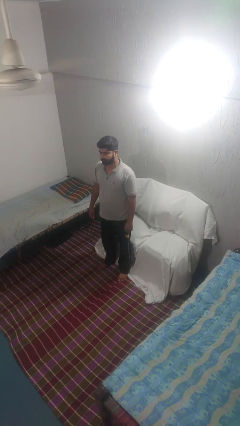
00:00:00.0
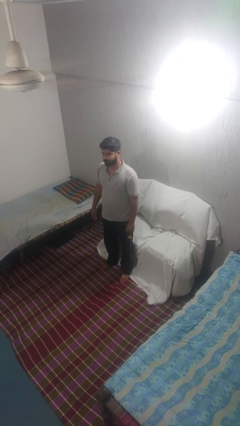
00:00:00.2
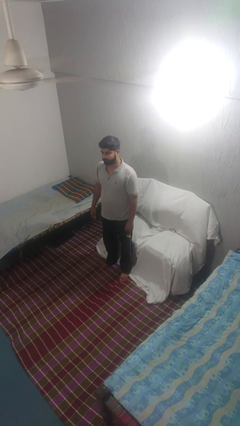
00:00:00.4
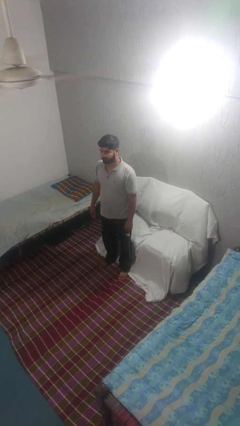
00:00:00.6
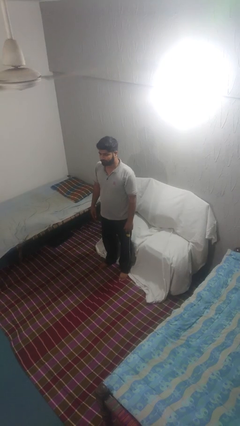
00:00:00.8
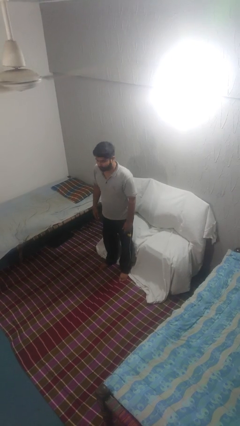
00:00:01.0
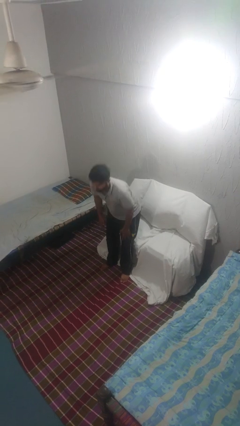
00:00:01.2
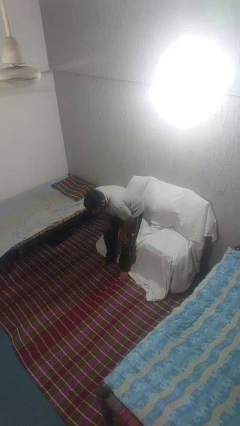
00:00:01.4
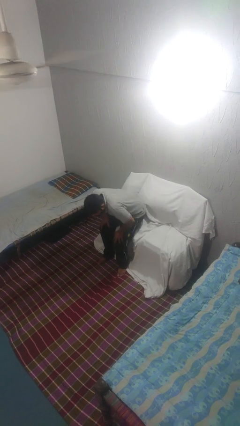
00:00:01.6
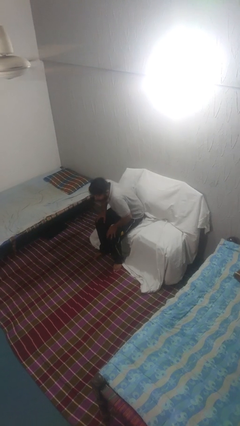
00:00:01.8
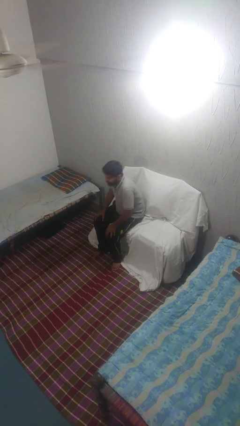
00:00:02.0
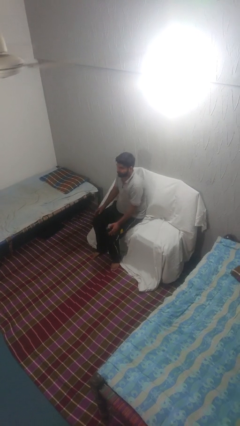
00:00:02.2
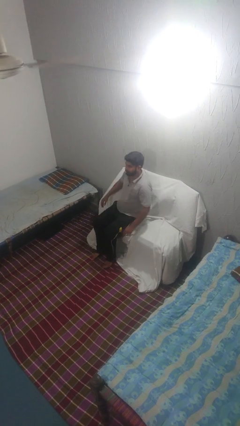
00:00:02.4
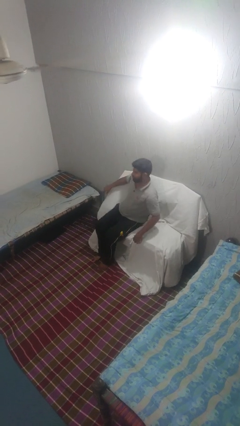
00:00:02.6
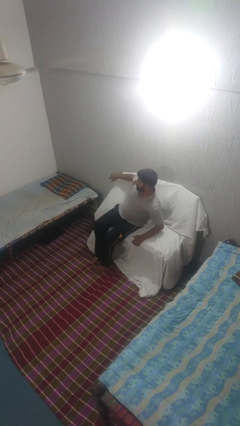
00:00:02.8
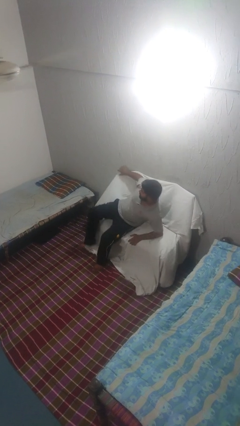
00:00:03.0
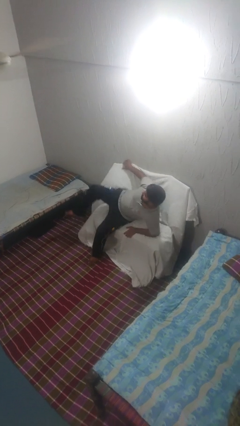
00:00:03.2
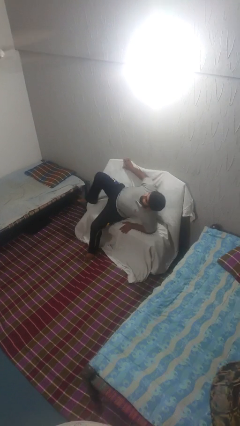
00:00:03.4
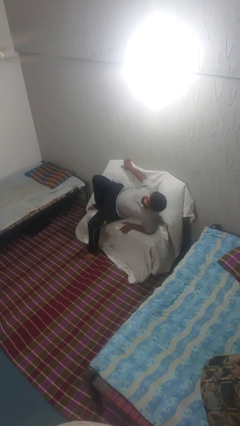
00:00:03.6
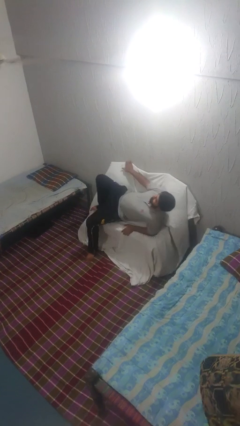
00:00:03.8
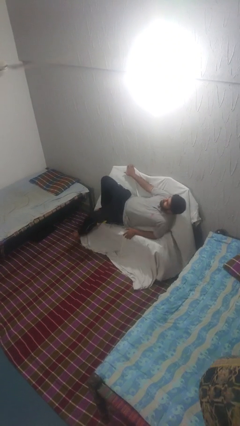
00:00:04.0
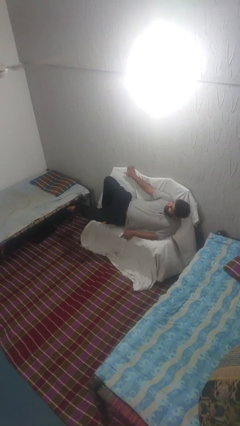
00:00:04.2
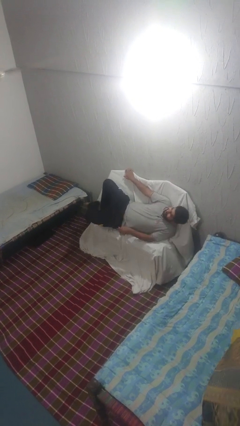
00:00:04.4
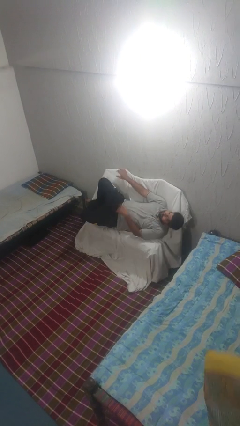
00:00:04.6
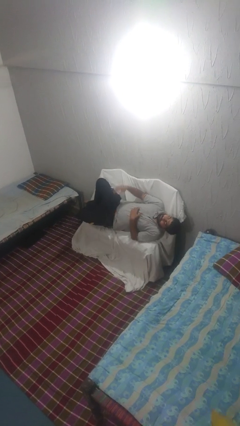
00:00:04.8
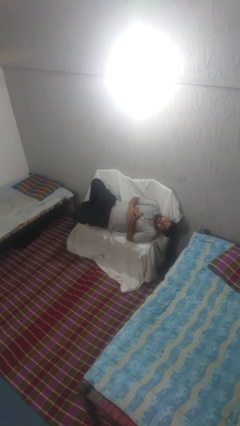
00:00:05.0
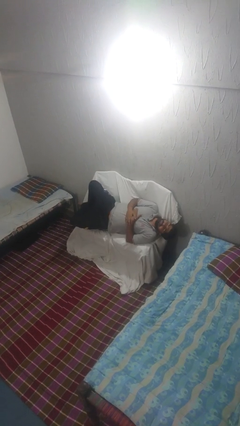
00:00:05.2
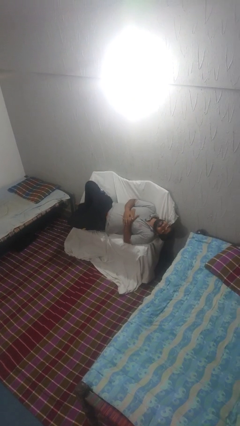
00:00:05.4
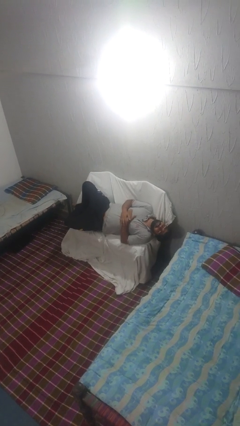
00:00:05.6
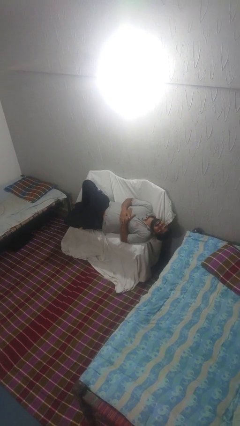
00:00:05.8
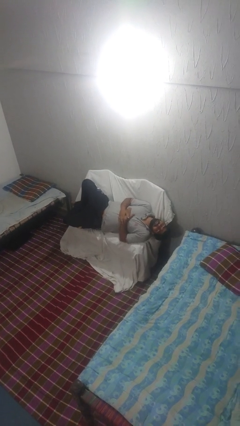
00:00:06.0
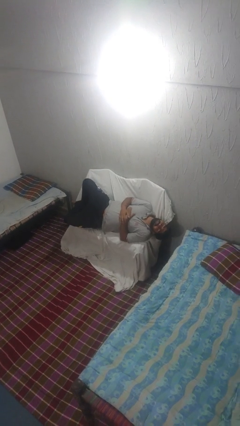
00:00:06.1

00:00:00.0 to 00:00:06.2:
person lies down on couch

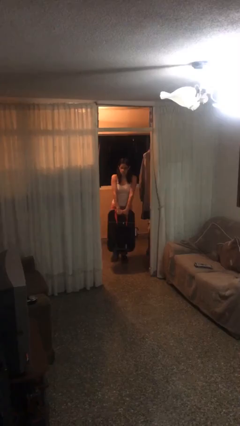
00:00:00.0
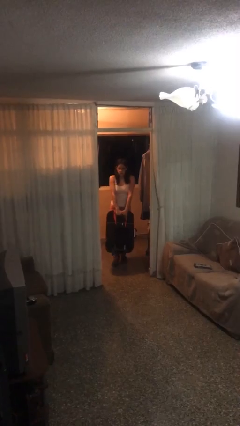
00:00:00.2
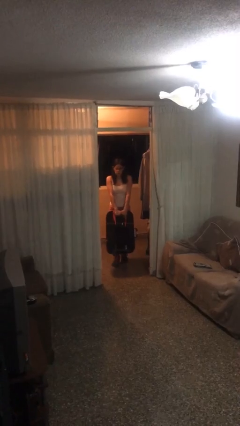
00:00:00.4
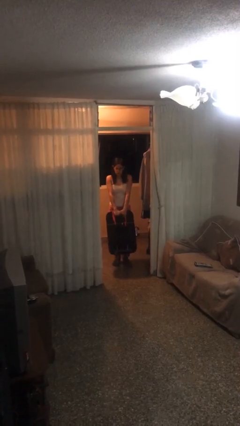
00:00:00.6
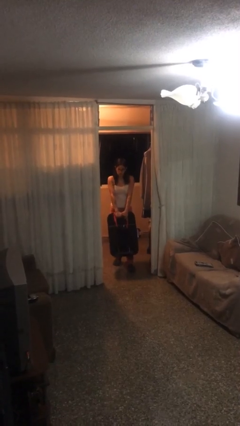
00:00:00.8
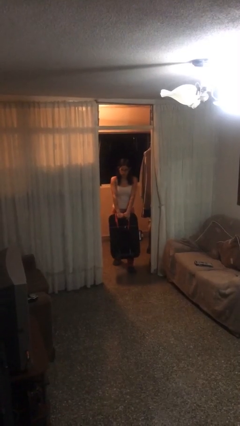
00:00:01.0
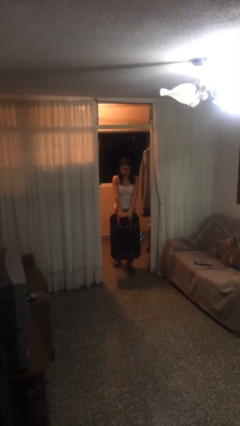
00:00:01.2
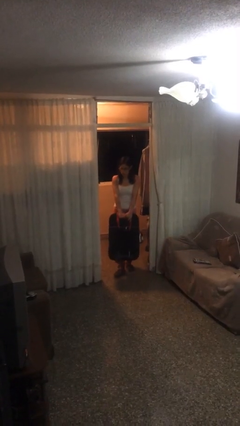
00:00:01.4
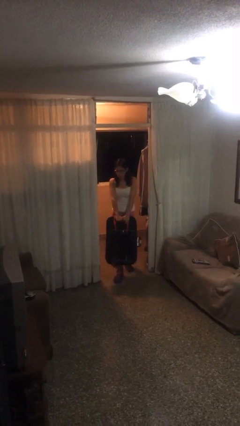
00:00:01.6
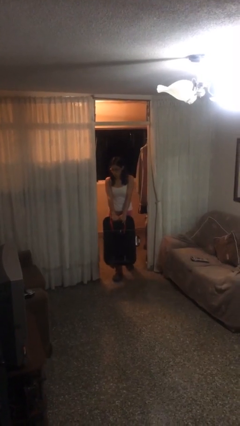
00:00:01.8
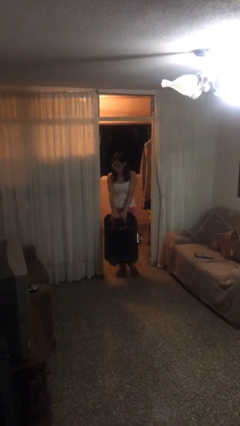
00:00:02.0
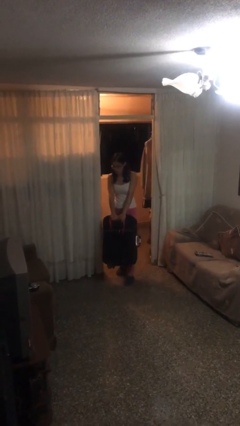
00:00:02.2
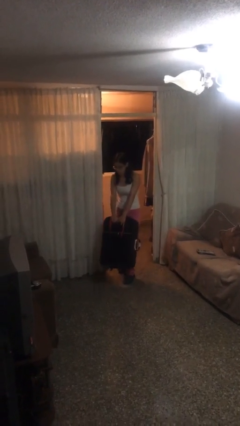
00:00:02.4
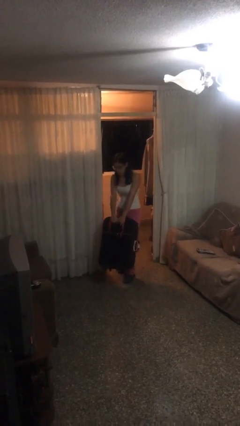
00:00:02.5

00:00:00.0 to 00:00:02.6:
person carries heavy object

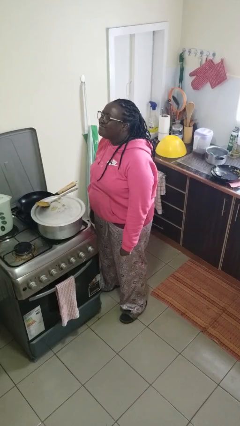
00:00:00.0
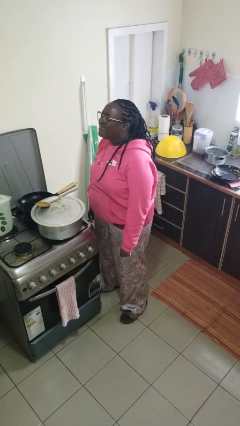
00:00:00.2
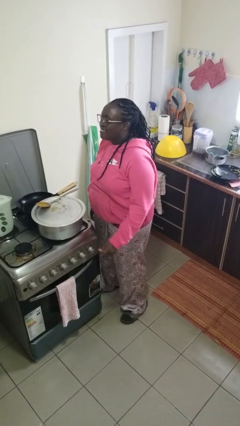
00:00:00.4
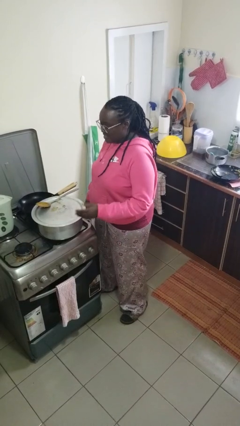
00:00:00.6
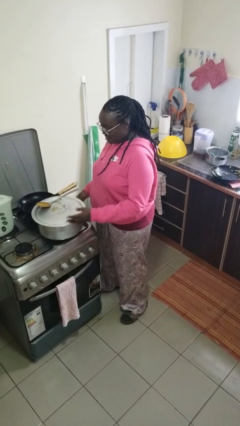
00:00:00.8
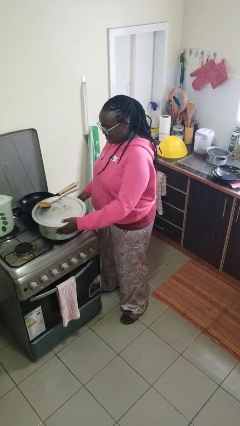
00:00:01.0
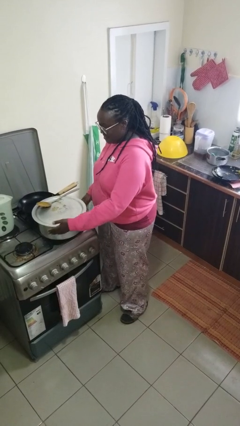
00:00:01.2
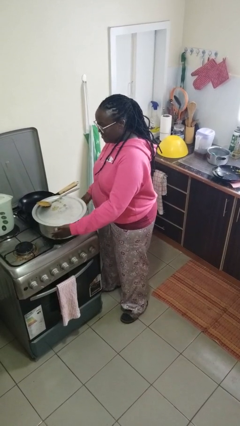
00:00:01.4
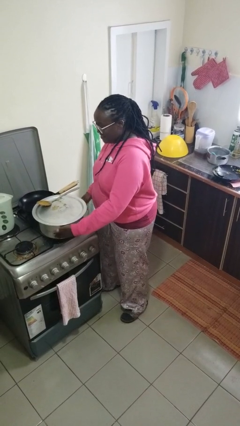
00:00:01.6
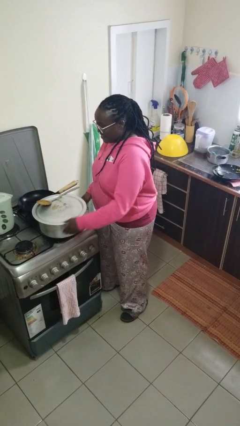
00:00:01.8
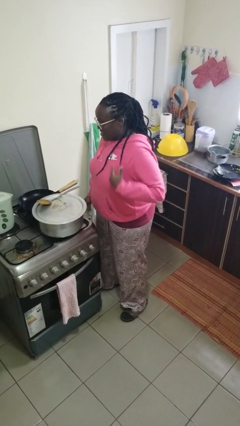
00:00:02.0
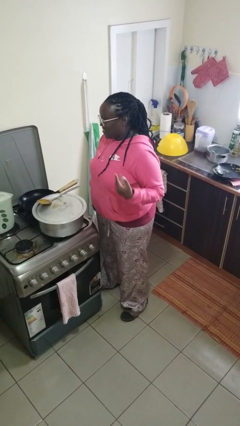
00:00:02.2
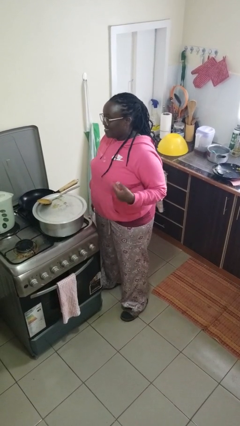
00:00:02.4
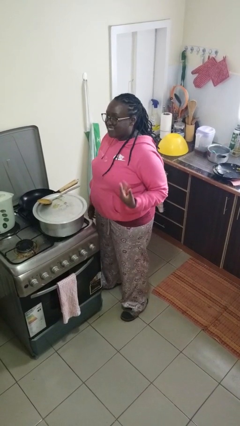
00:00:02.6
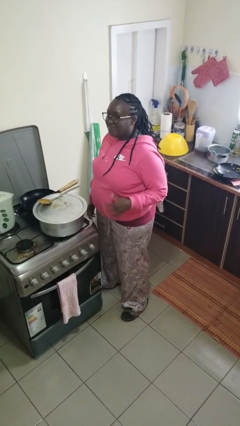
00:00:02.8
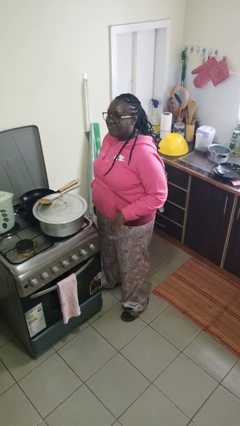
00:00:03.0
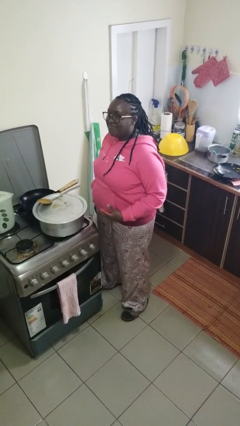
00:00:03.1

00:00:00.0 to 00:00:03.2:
person burns hand

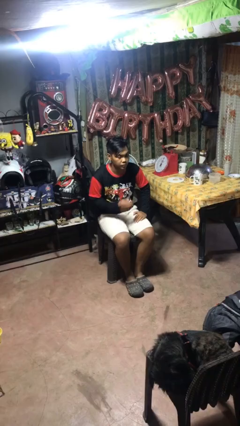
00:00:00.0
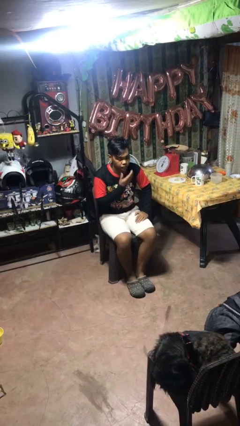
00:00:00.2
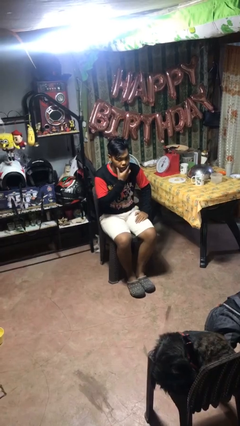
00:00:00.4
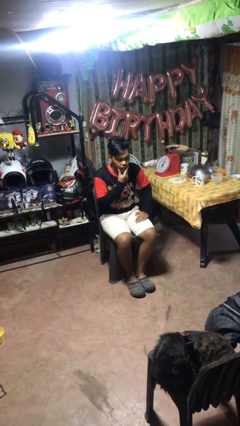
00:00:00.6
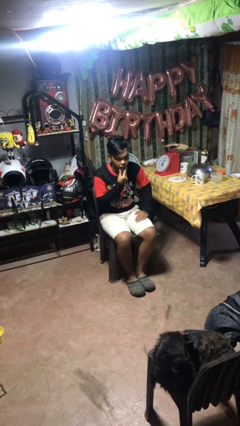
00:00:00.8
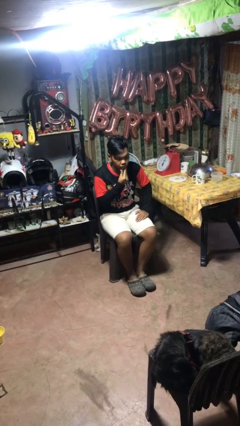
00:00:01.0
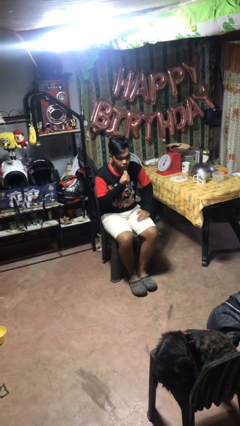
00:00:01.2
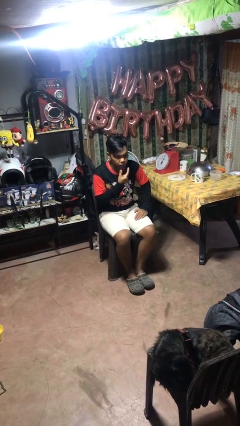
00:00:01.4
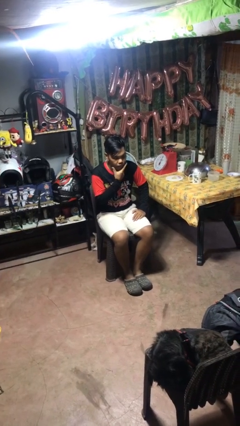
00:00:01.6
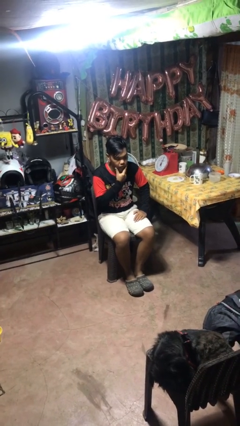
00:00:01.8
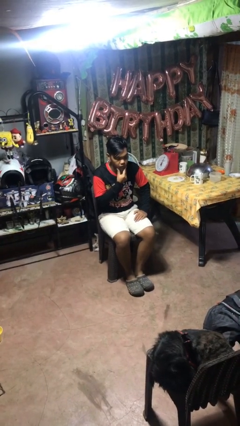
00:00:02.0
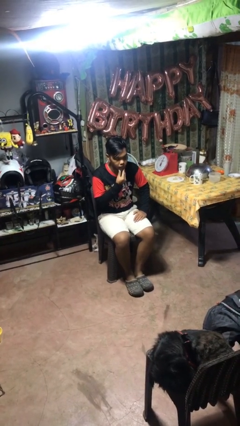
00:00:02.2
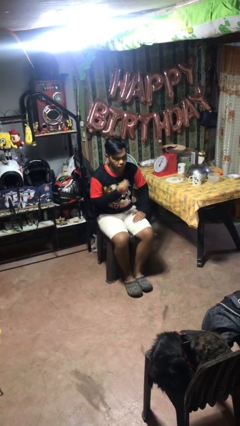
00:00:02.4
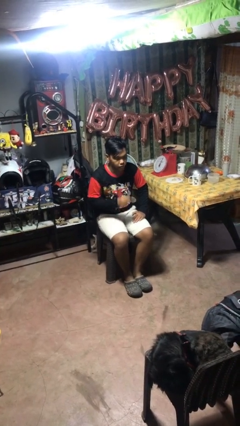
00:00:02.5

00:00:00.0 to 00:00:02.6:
person strokes chin

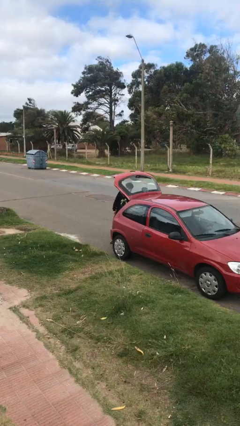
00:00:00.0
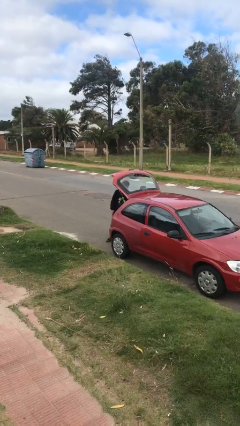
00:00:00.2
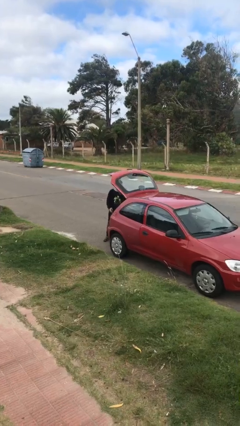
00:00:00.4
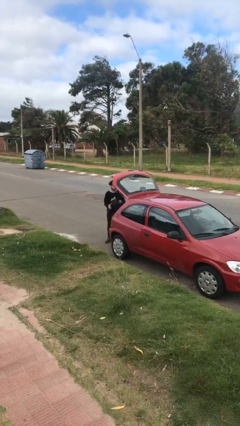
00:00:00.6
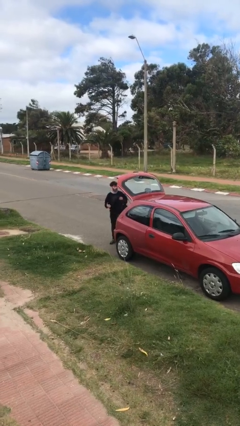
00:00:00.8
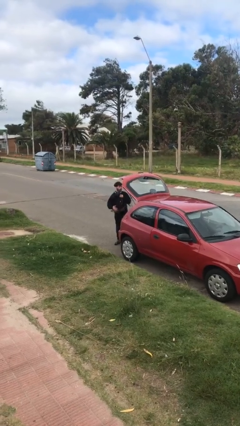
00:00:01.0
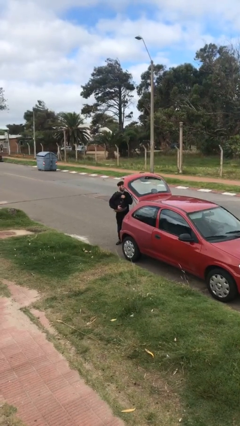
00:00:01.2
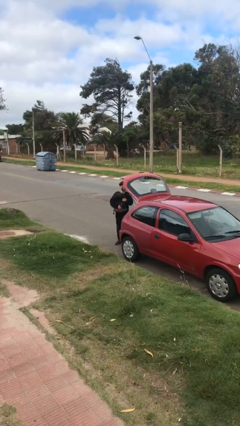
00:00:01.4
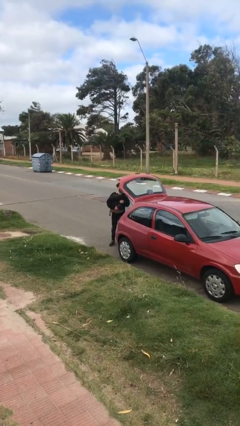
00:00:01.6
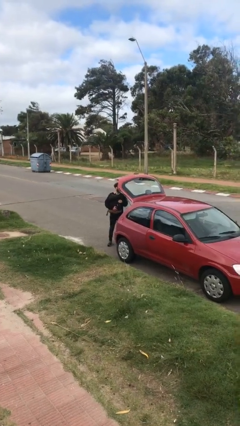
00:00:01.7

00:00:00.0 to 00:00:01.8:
person unloads car

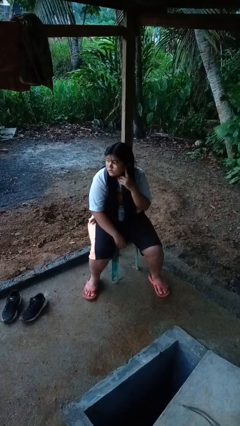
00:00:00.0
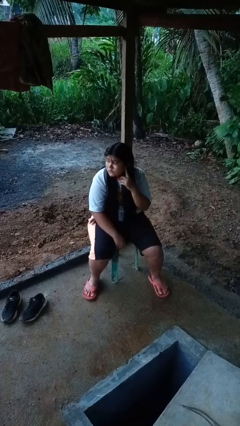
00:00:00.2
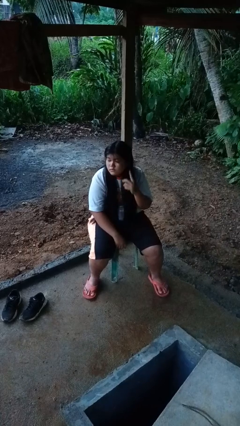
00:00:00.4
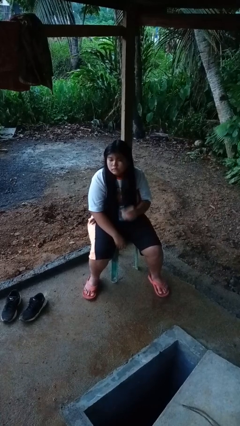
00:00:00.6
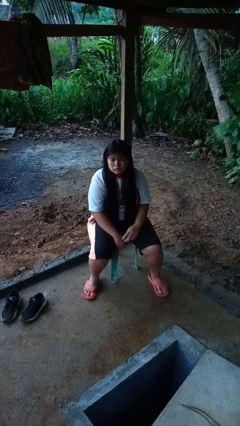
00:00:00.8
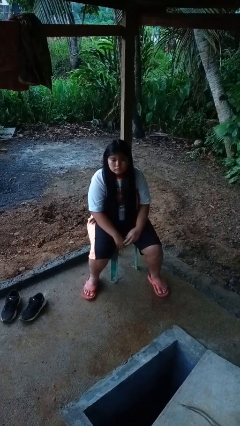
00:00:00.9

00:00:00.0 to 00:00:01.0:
person gestures listen closely
